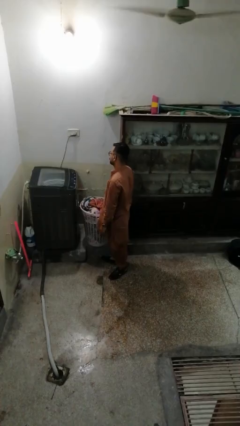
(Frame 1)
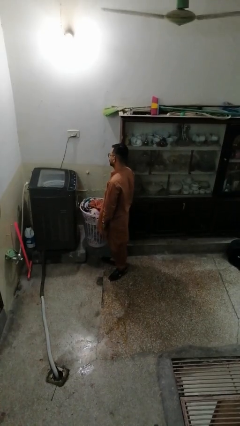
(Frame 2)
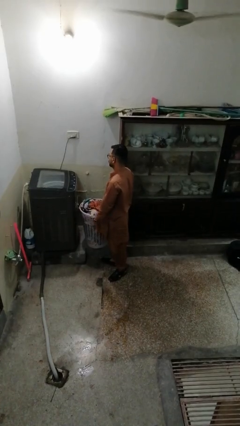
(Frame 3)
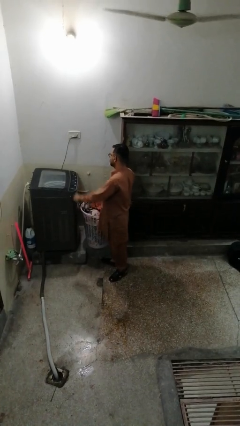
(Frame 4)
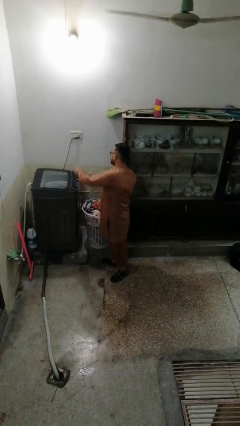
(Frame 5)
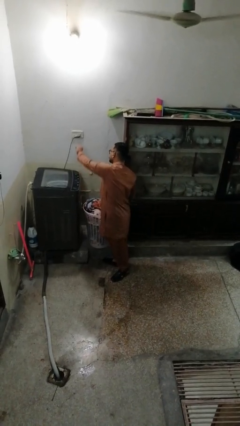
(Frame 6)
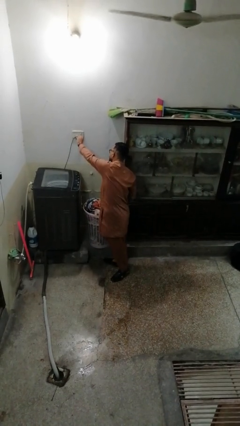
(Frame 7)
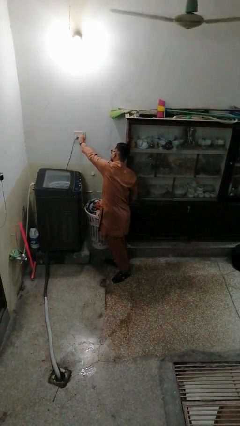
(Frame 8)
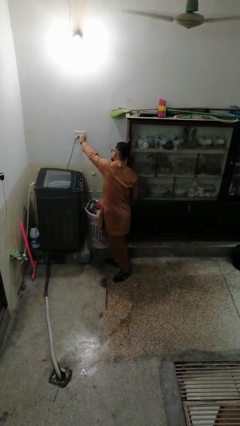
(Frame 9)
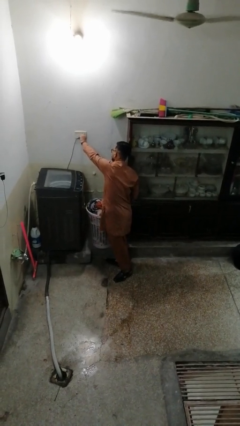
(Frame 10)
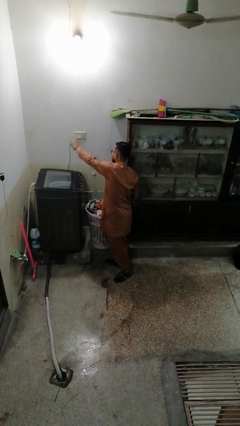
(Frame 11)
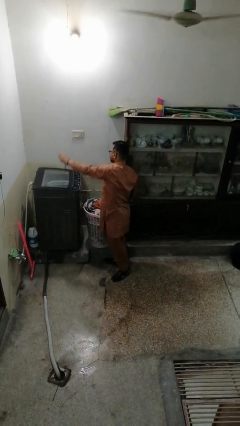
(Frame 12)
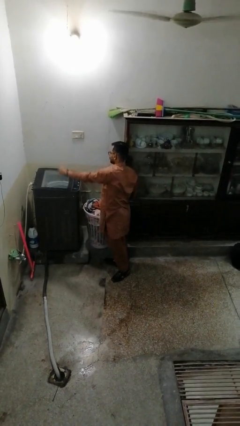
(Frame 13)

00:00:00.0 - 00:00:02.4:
person unplugs from electrical socket

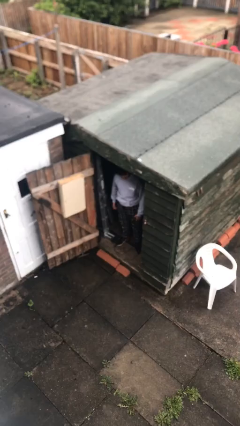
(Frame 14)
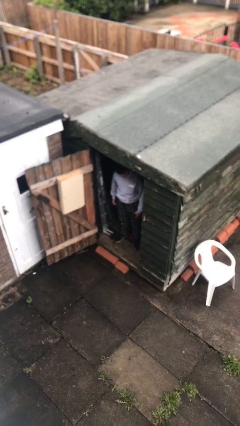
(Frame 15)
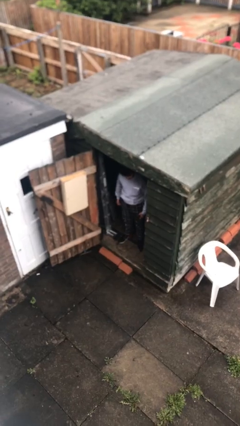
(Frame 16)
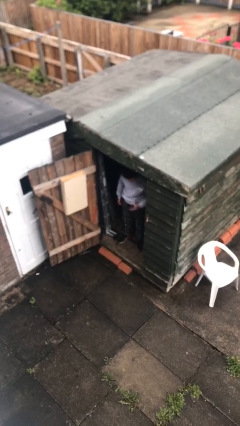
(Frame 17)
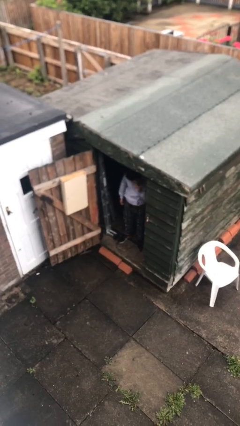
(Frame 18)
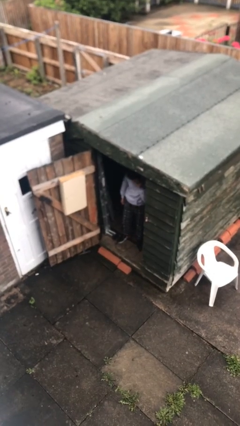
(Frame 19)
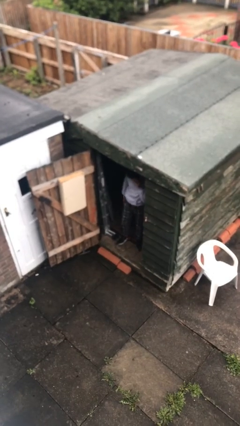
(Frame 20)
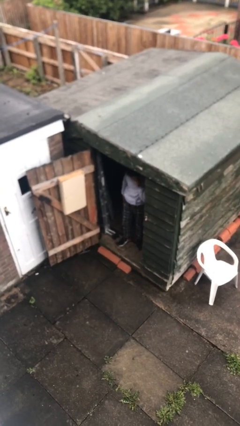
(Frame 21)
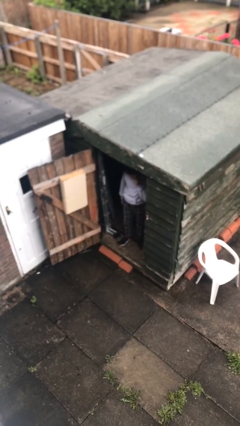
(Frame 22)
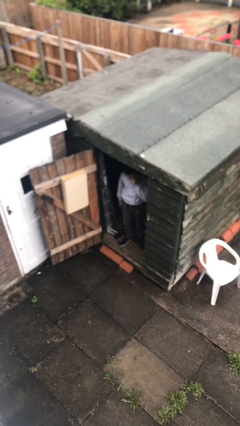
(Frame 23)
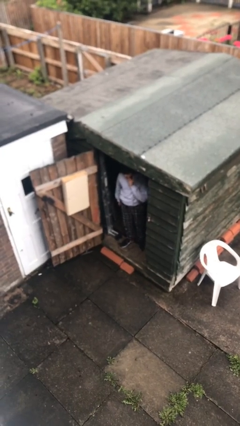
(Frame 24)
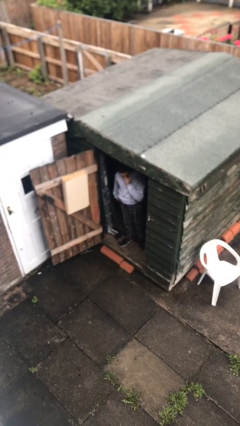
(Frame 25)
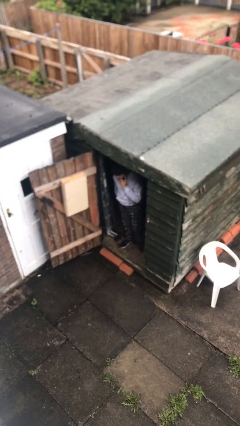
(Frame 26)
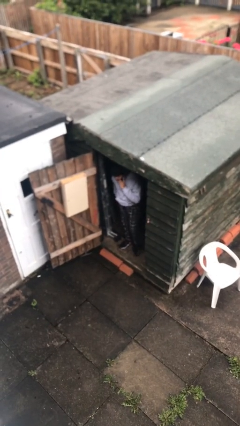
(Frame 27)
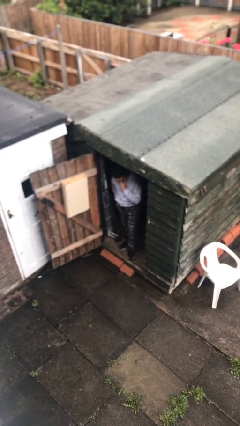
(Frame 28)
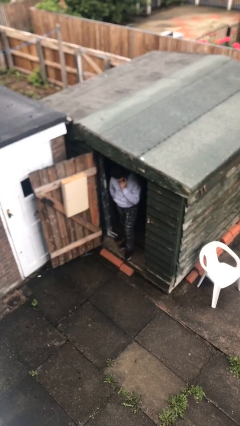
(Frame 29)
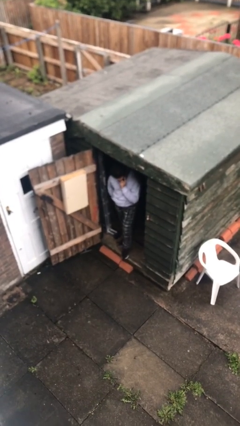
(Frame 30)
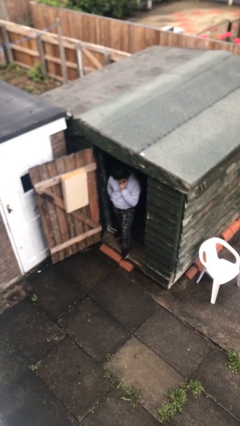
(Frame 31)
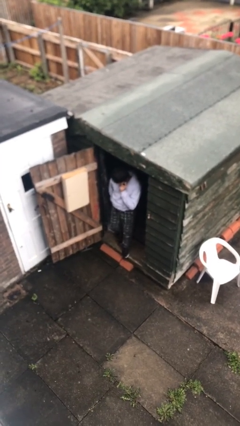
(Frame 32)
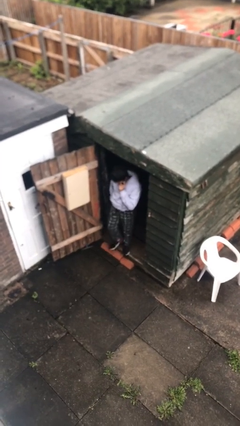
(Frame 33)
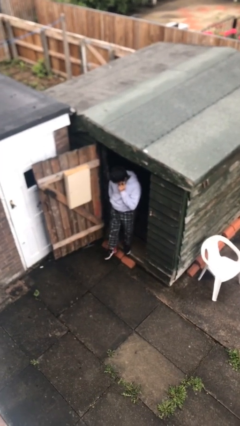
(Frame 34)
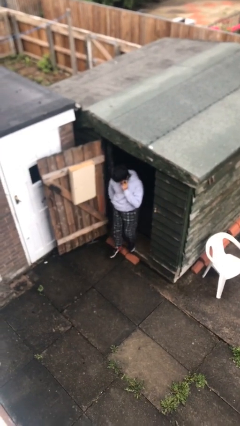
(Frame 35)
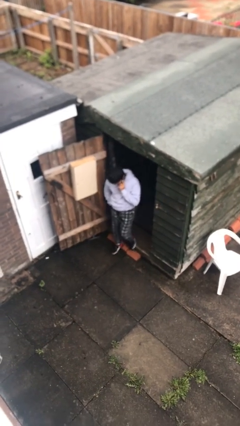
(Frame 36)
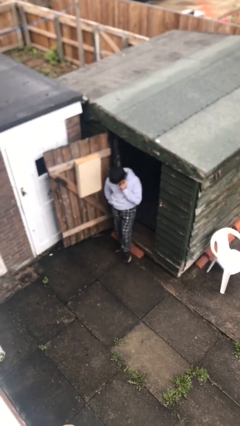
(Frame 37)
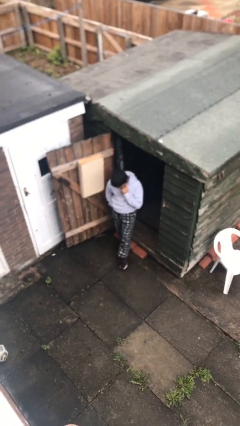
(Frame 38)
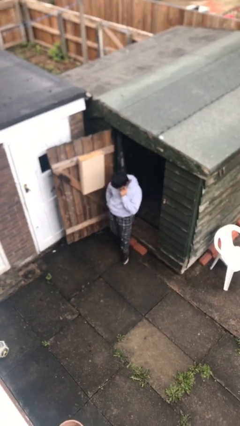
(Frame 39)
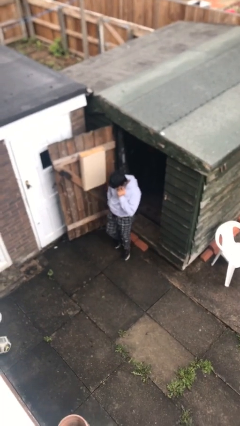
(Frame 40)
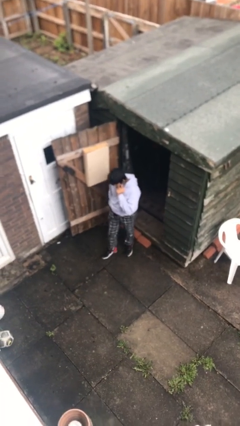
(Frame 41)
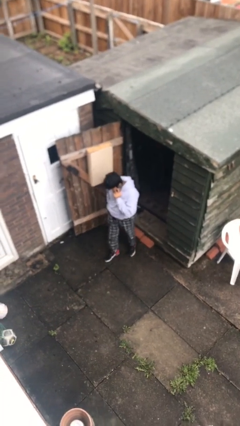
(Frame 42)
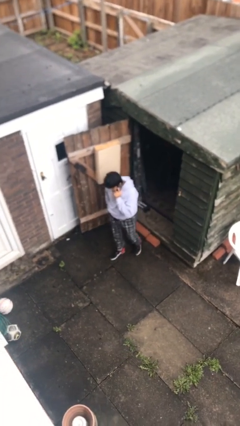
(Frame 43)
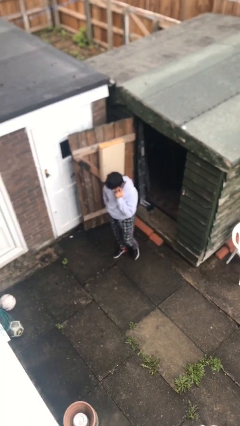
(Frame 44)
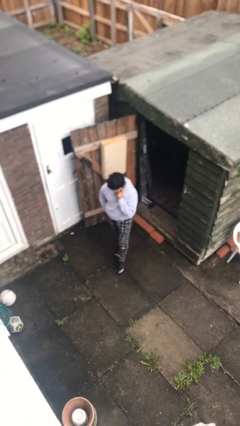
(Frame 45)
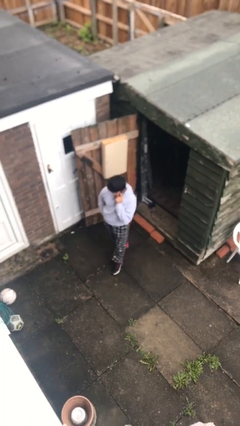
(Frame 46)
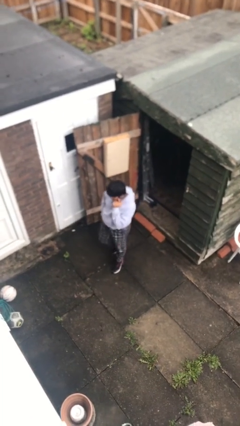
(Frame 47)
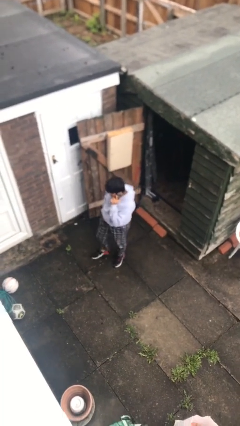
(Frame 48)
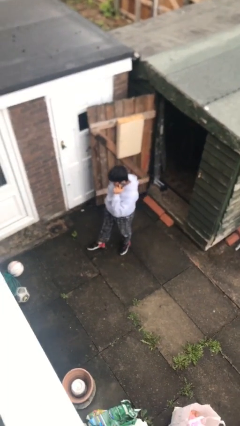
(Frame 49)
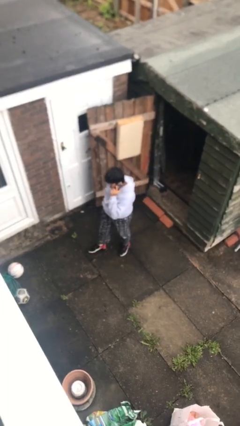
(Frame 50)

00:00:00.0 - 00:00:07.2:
person enters scene through structure

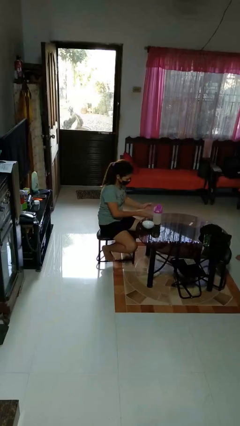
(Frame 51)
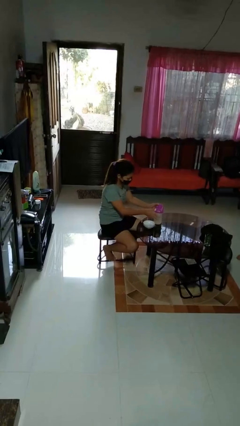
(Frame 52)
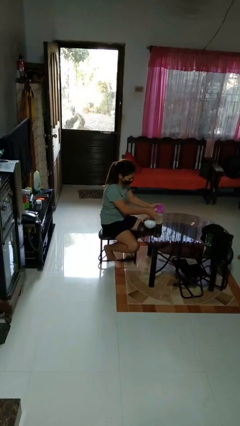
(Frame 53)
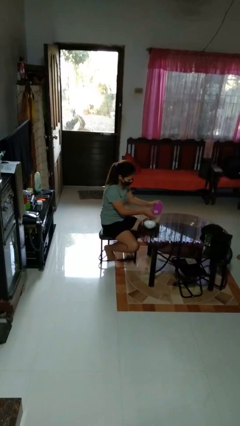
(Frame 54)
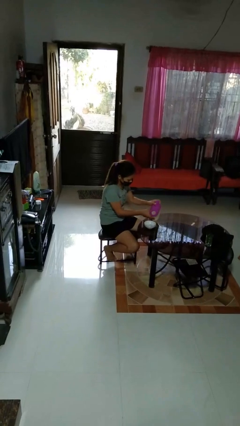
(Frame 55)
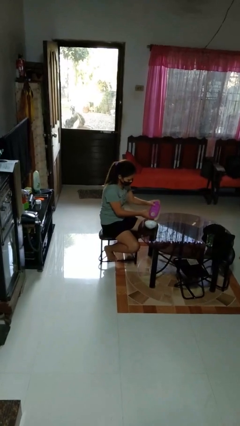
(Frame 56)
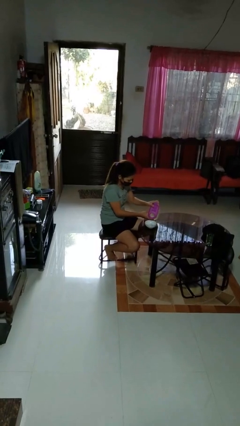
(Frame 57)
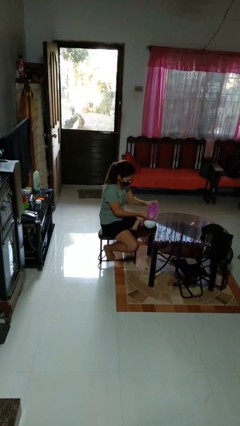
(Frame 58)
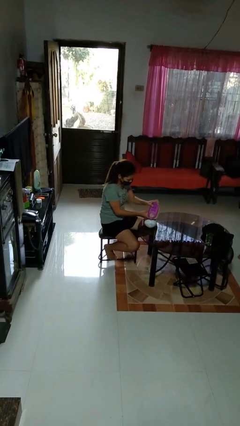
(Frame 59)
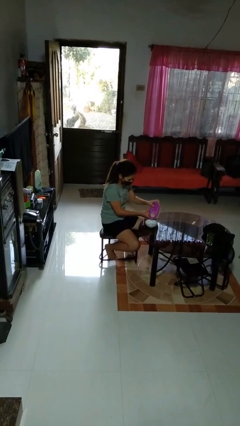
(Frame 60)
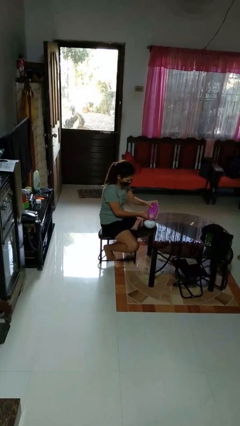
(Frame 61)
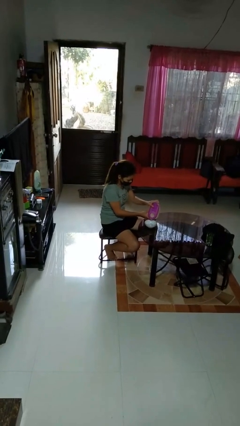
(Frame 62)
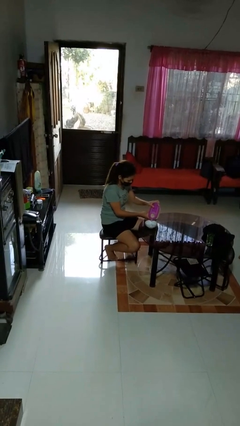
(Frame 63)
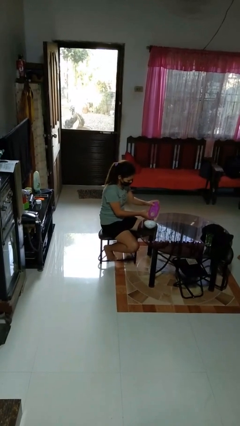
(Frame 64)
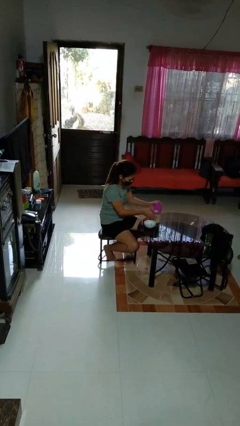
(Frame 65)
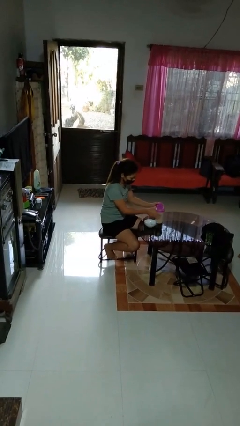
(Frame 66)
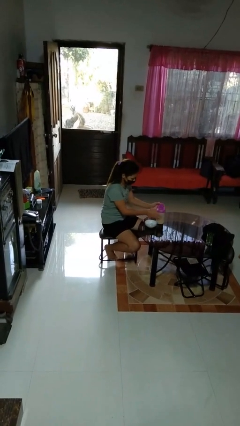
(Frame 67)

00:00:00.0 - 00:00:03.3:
person pours into bowl

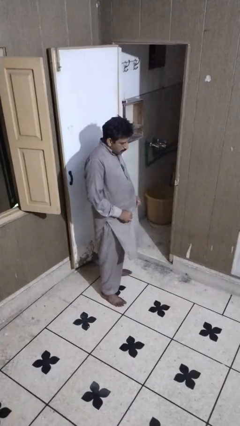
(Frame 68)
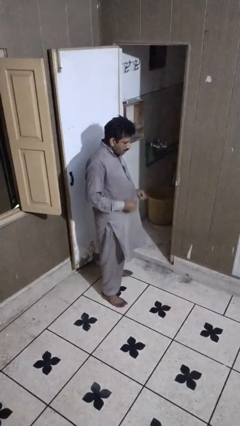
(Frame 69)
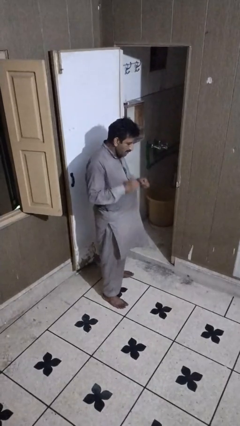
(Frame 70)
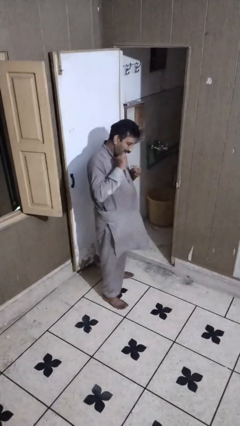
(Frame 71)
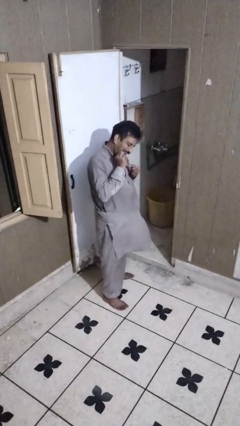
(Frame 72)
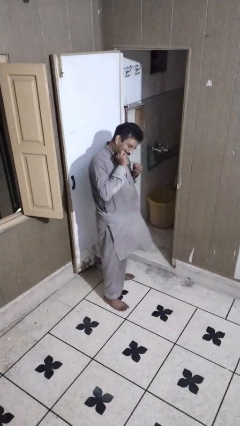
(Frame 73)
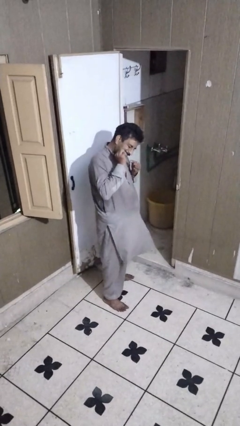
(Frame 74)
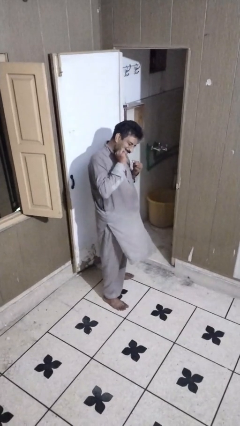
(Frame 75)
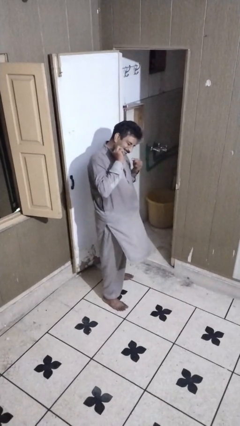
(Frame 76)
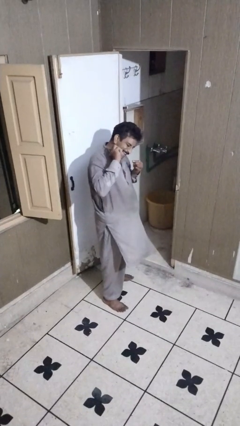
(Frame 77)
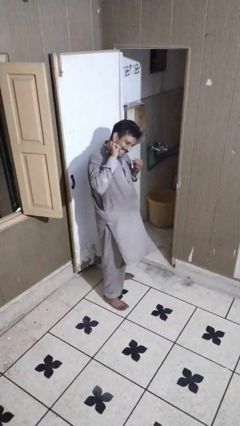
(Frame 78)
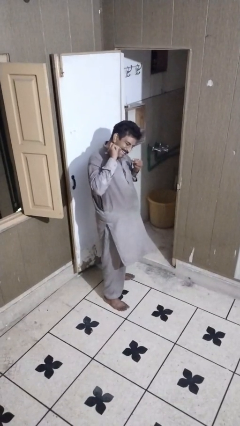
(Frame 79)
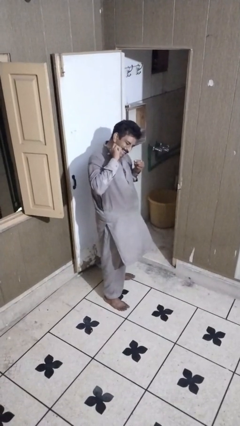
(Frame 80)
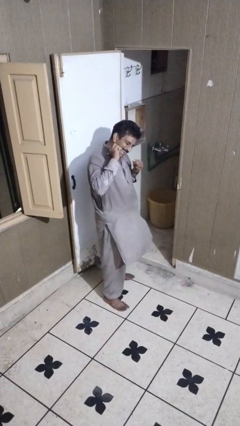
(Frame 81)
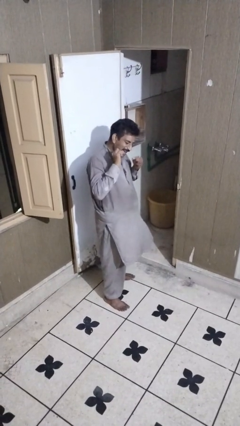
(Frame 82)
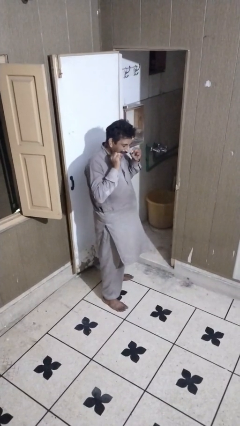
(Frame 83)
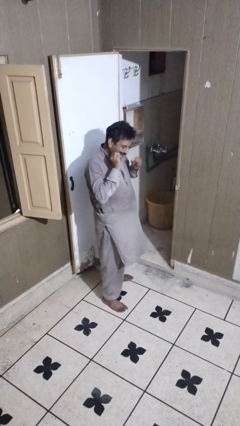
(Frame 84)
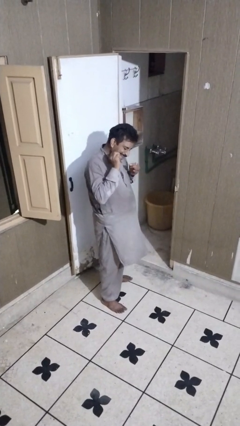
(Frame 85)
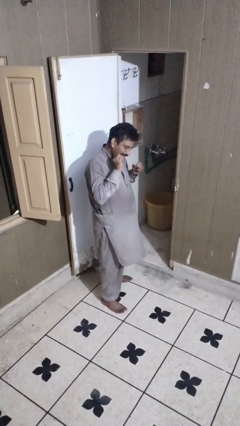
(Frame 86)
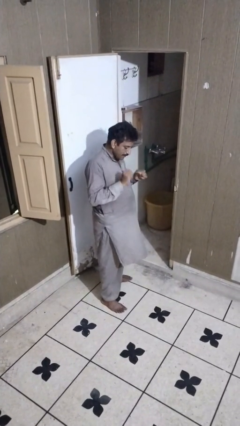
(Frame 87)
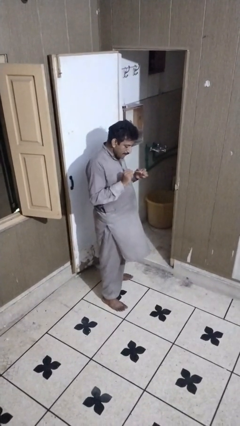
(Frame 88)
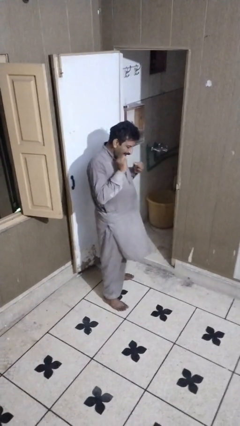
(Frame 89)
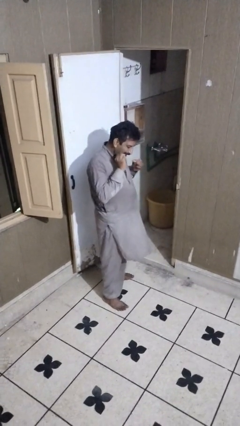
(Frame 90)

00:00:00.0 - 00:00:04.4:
person flosses

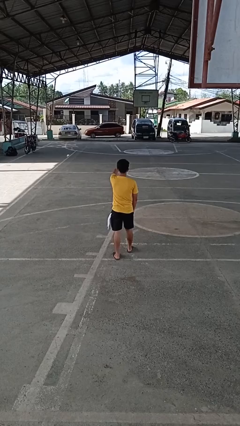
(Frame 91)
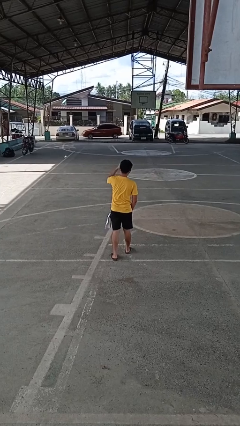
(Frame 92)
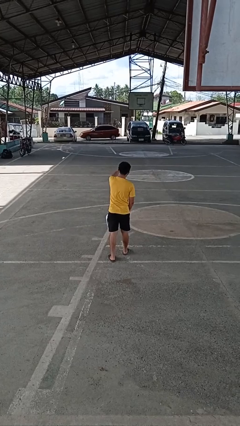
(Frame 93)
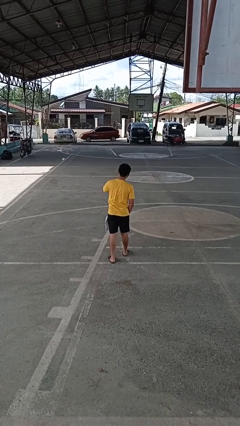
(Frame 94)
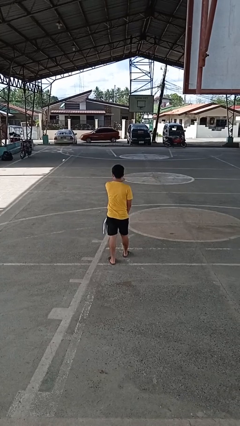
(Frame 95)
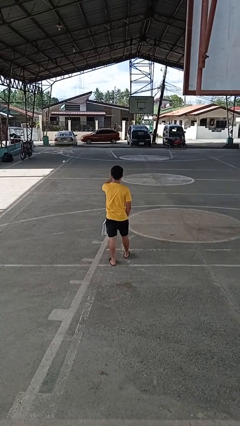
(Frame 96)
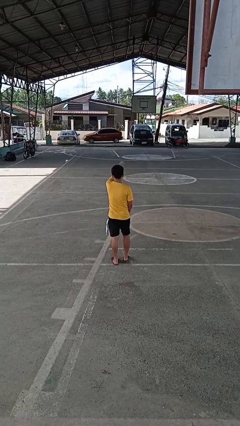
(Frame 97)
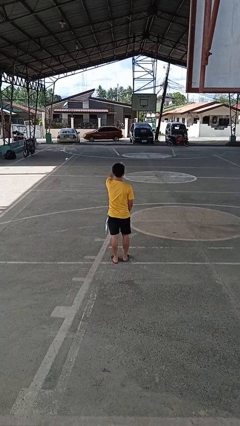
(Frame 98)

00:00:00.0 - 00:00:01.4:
person punches
